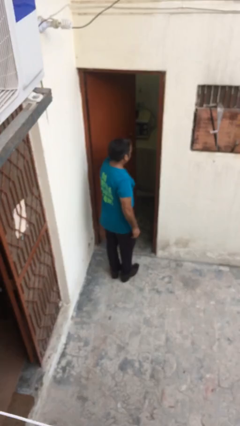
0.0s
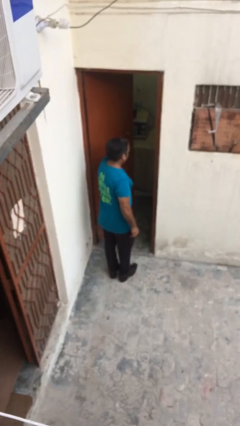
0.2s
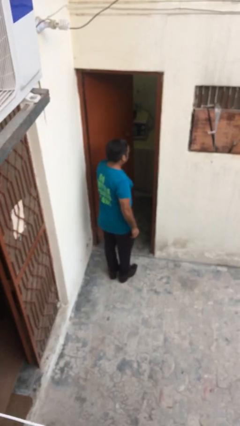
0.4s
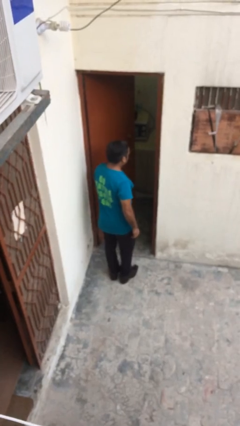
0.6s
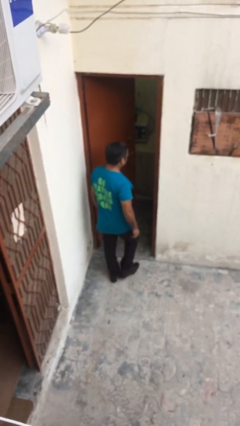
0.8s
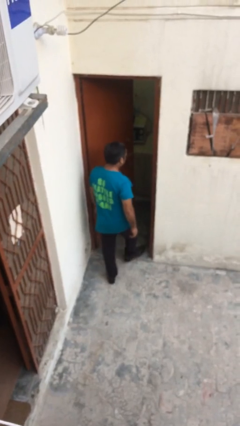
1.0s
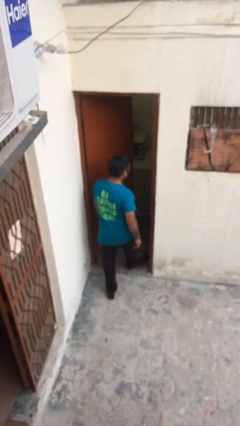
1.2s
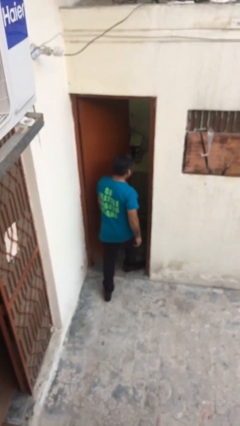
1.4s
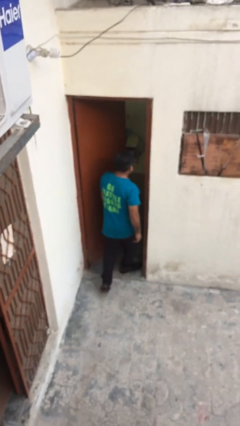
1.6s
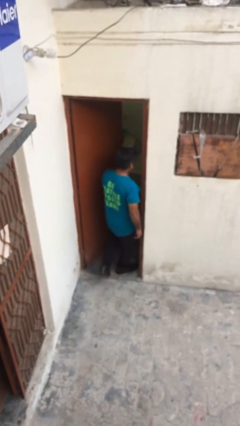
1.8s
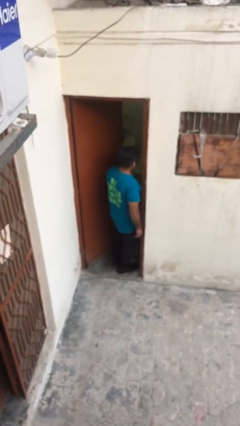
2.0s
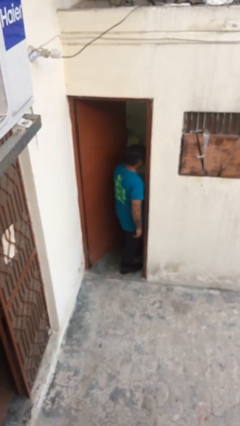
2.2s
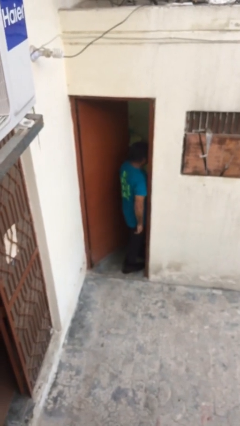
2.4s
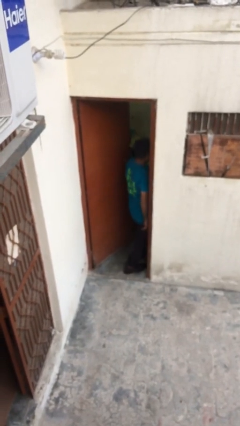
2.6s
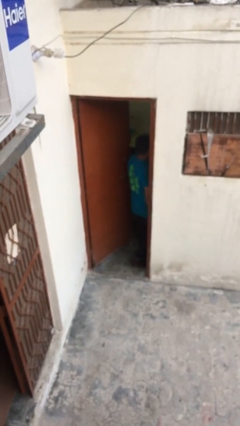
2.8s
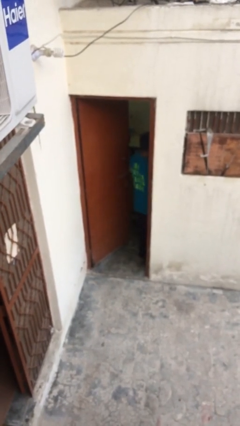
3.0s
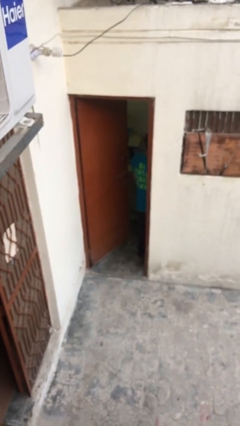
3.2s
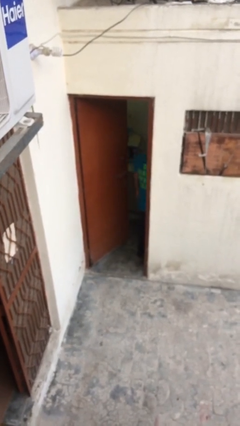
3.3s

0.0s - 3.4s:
person exits scene through structure

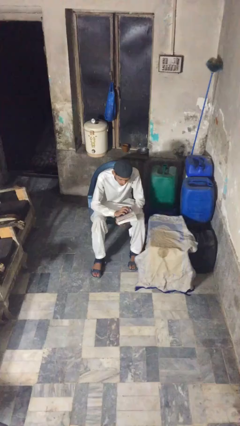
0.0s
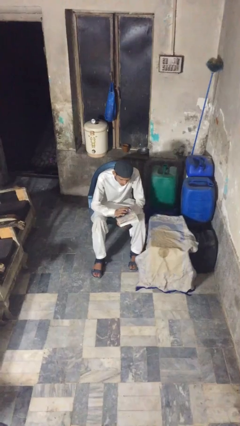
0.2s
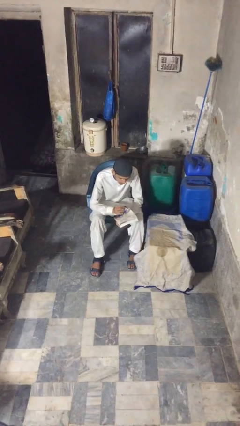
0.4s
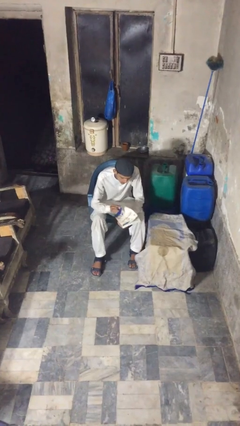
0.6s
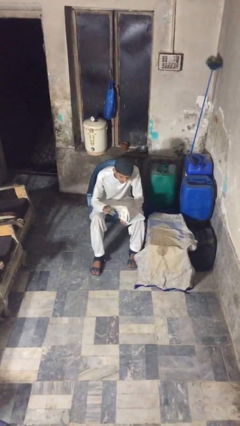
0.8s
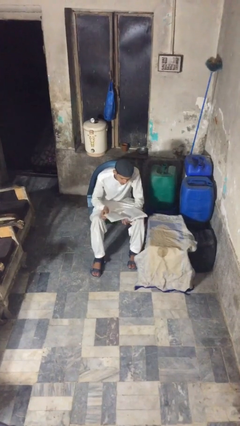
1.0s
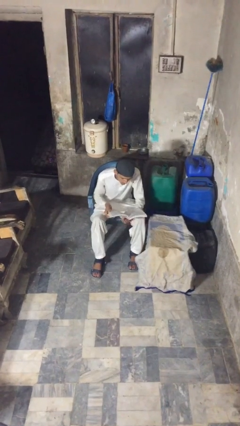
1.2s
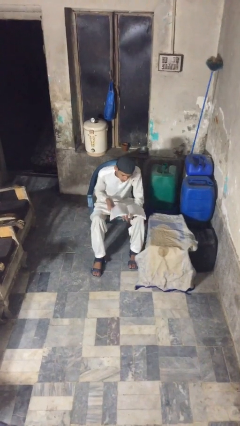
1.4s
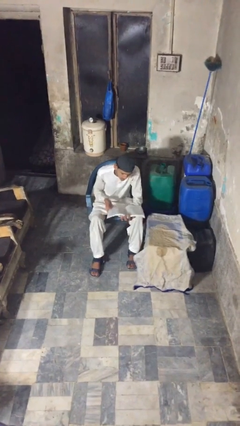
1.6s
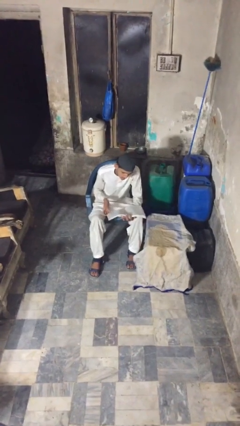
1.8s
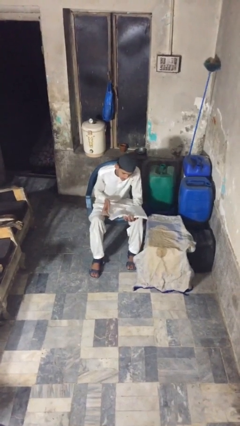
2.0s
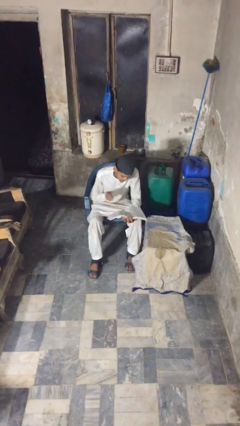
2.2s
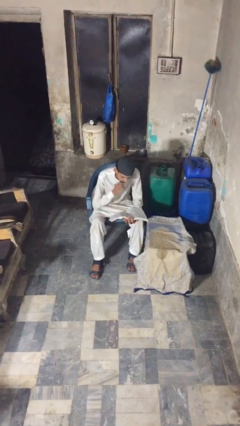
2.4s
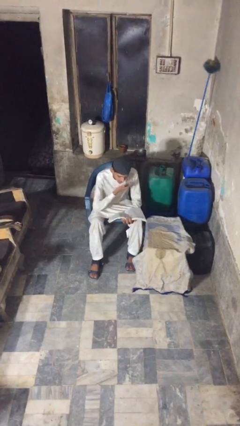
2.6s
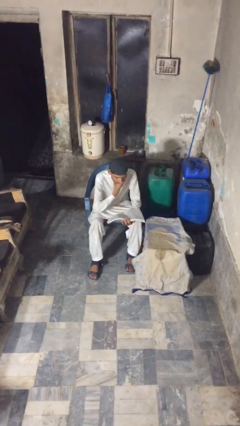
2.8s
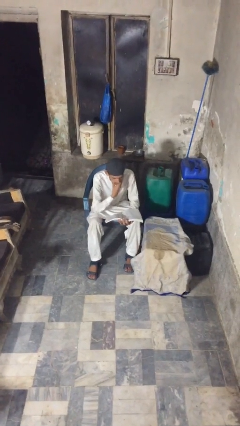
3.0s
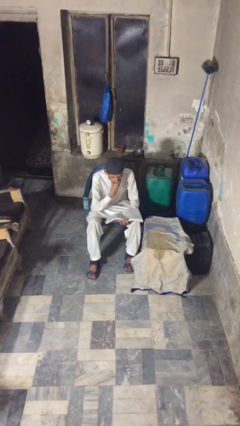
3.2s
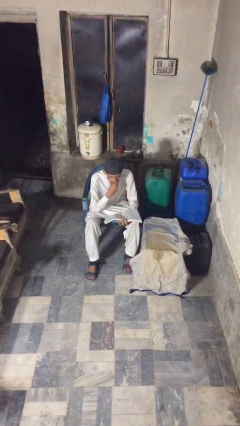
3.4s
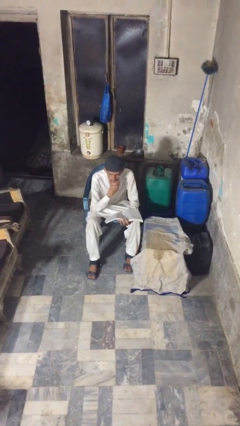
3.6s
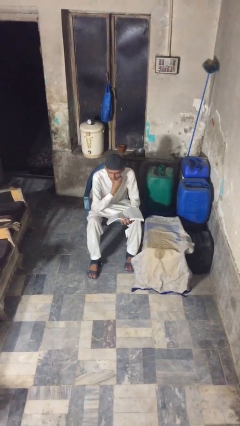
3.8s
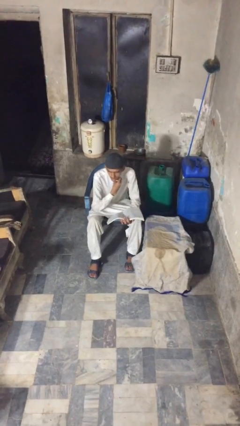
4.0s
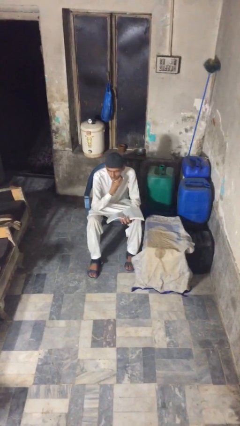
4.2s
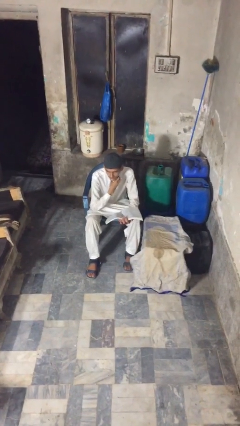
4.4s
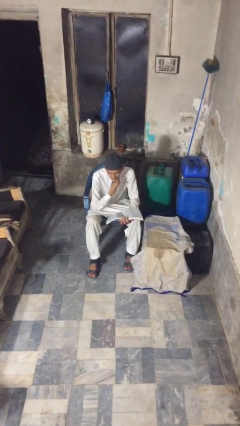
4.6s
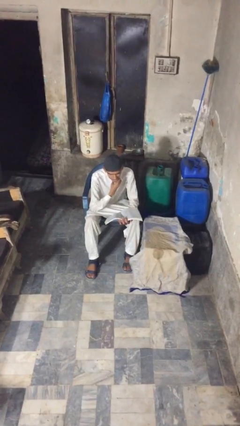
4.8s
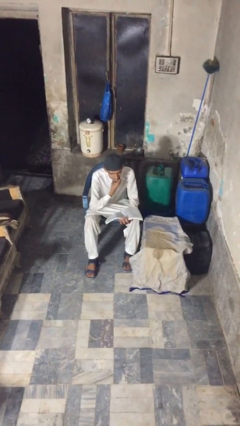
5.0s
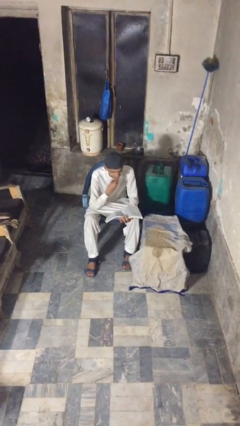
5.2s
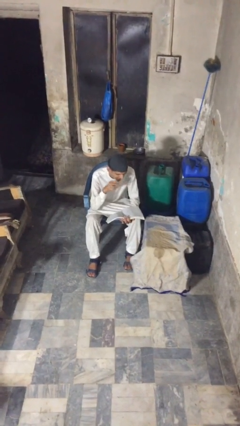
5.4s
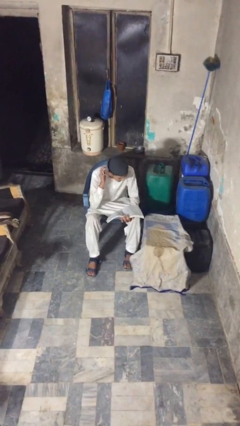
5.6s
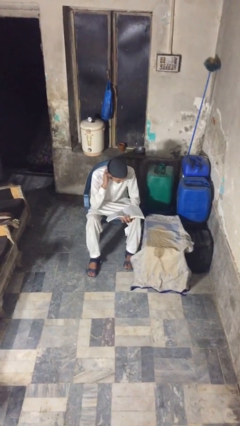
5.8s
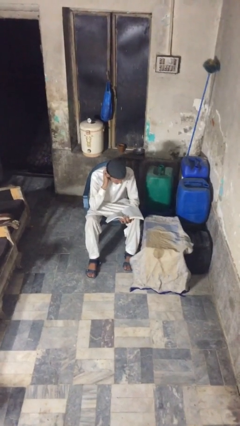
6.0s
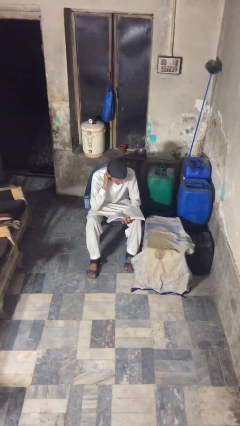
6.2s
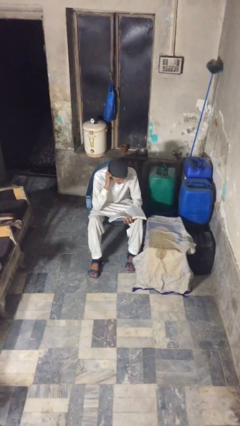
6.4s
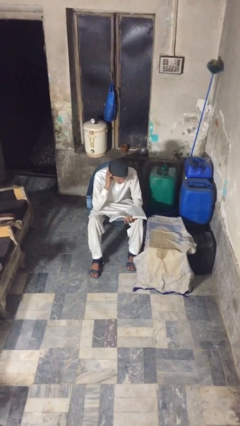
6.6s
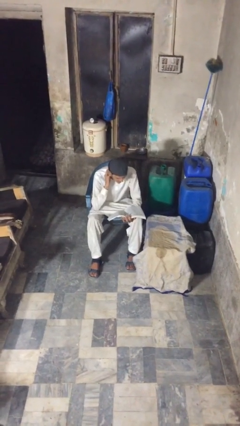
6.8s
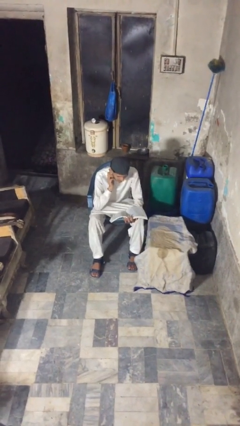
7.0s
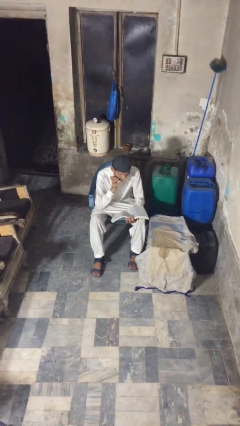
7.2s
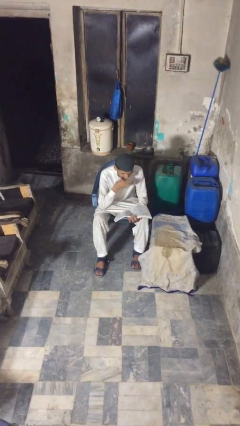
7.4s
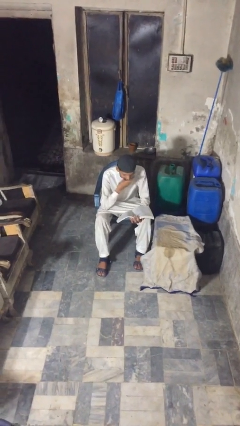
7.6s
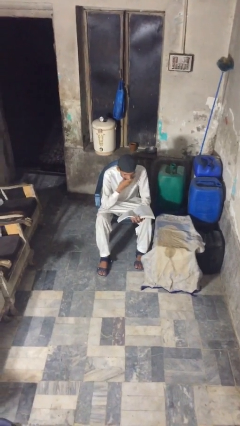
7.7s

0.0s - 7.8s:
person reads document

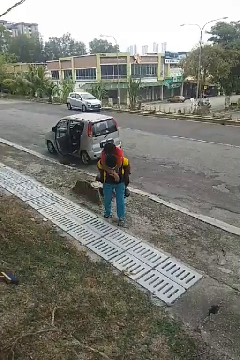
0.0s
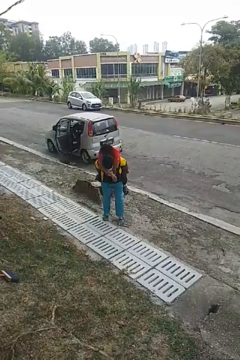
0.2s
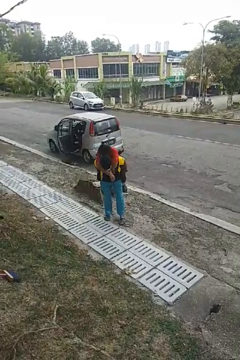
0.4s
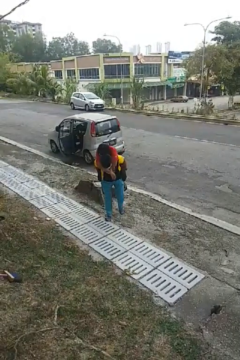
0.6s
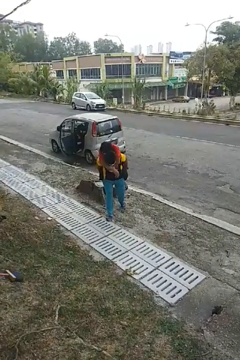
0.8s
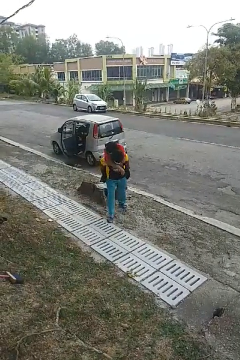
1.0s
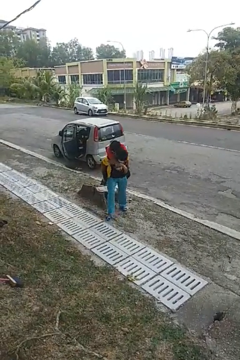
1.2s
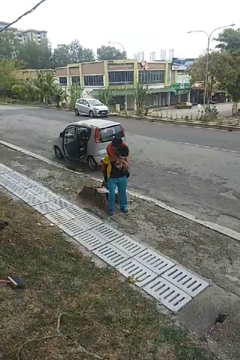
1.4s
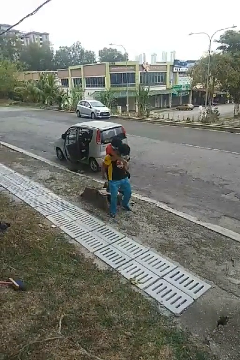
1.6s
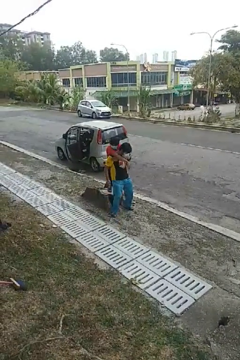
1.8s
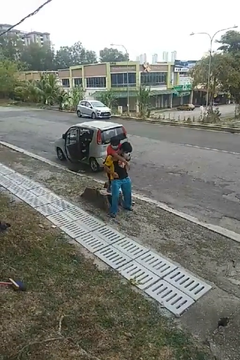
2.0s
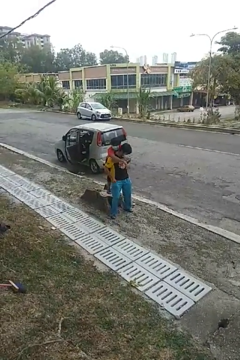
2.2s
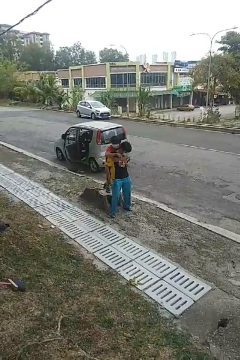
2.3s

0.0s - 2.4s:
person puts down person

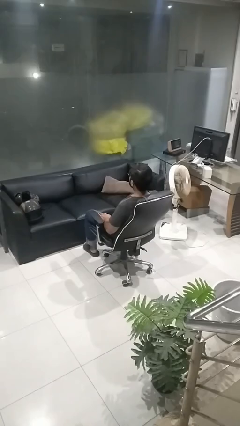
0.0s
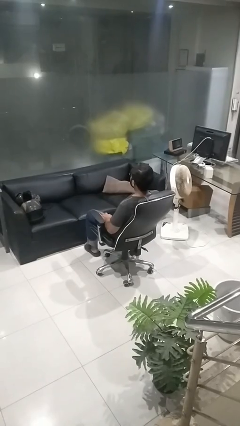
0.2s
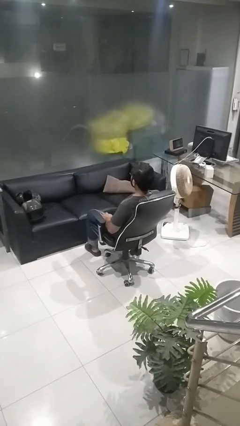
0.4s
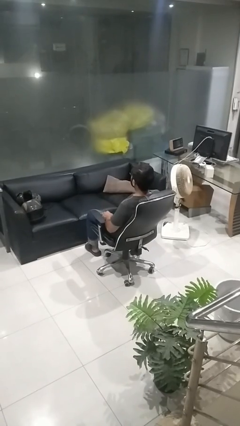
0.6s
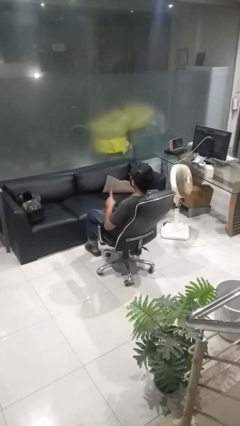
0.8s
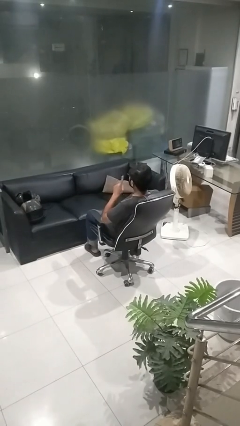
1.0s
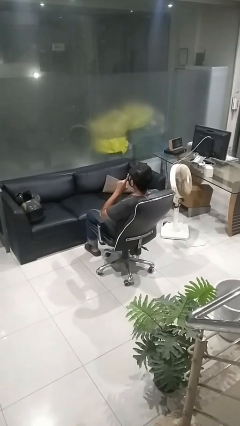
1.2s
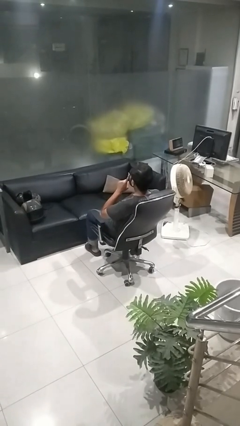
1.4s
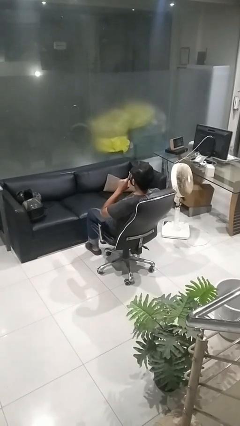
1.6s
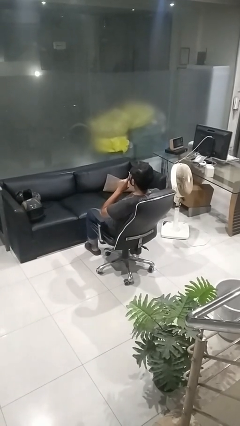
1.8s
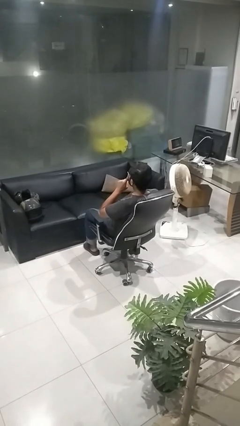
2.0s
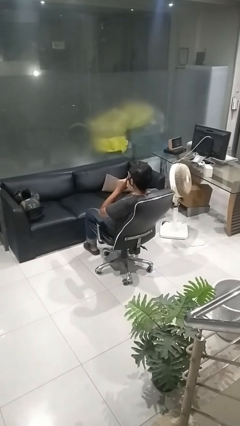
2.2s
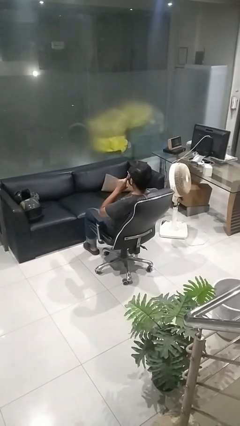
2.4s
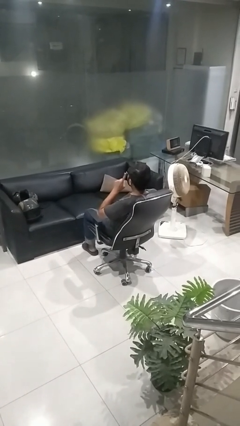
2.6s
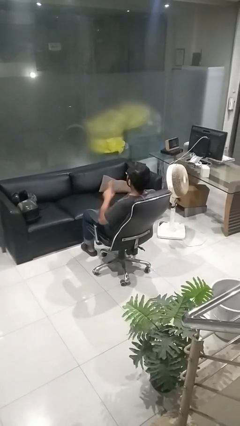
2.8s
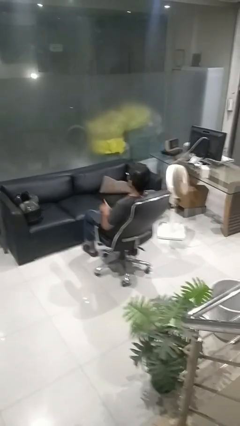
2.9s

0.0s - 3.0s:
person gestures be quiet

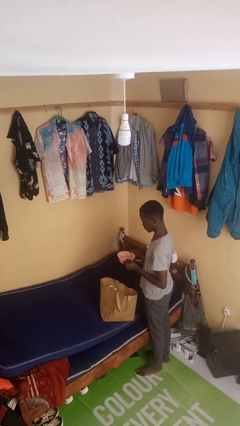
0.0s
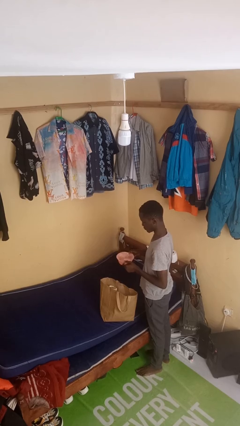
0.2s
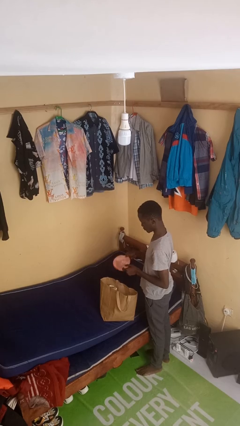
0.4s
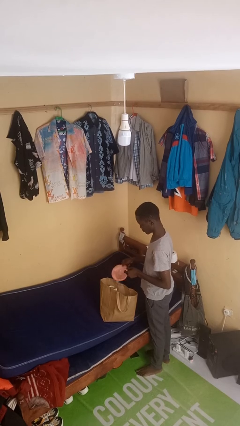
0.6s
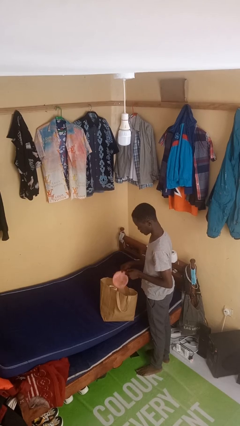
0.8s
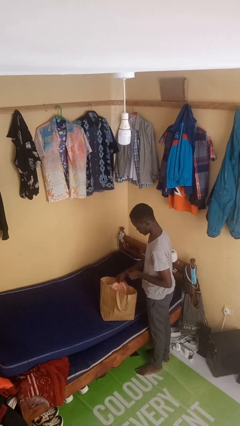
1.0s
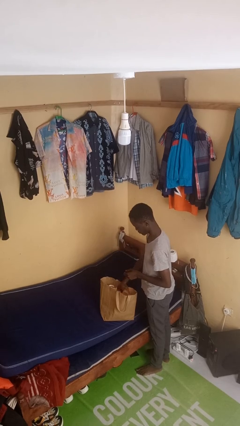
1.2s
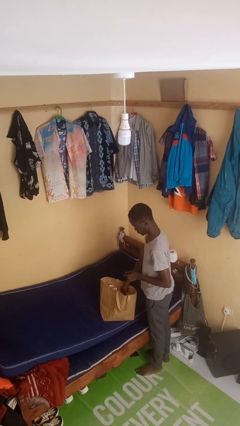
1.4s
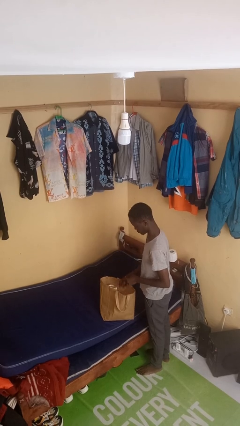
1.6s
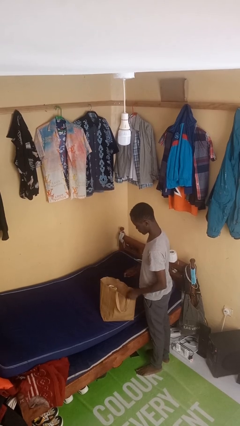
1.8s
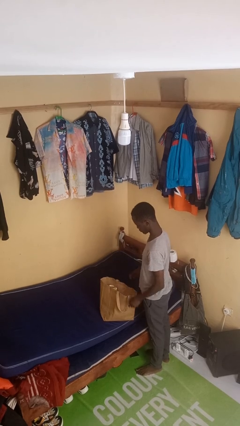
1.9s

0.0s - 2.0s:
person puts object into bag

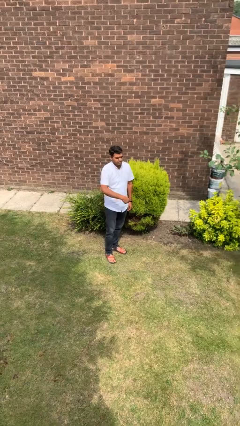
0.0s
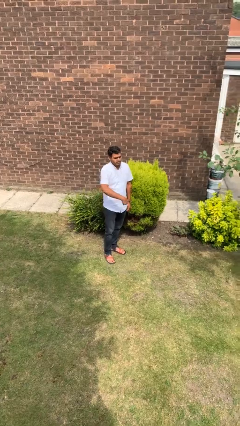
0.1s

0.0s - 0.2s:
person gestures swipe up
